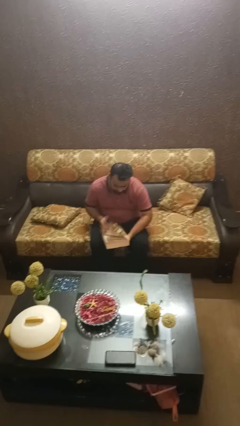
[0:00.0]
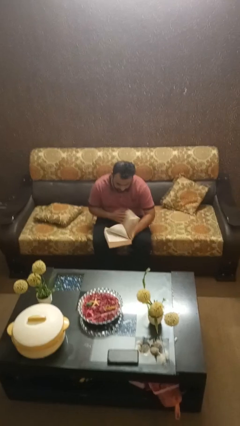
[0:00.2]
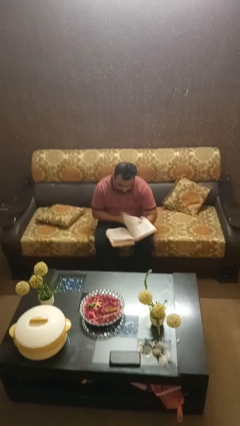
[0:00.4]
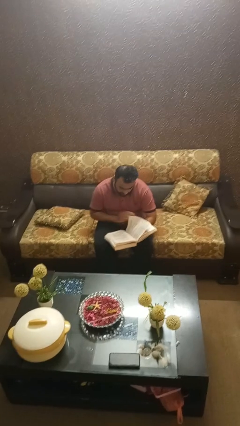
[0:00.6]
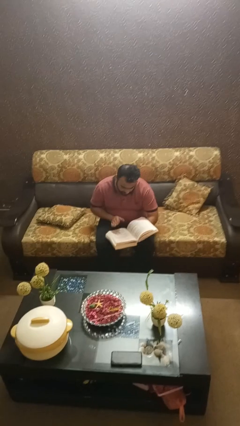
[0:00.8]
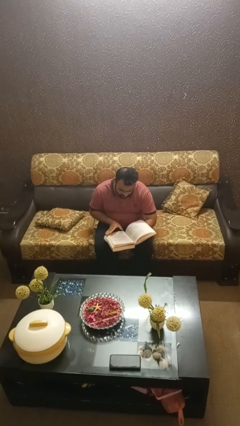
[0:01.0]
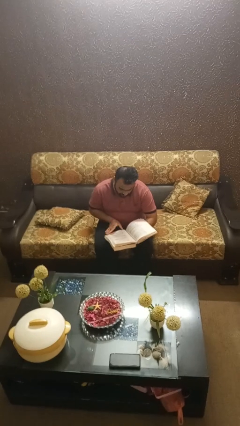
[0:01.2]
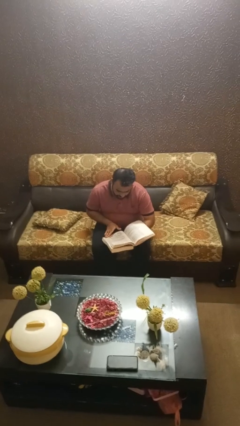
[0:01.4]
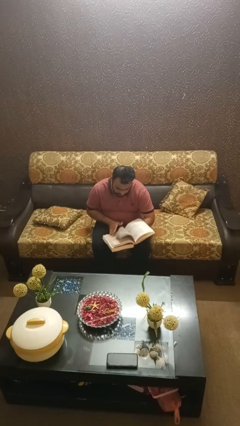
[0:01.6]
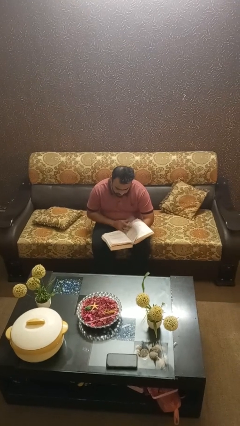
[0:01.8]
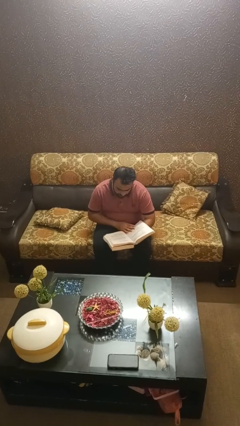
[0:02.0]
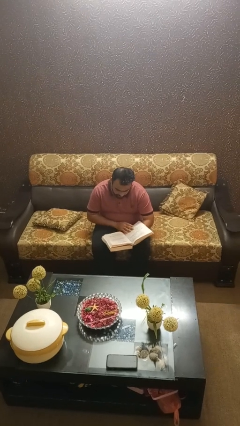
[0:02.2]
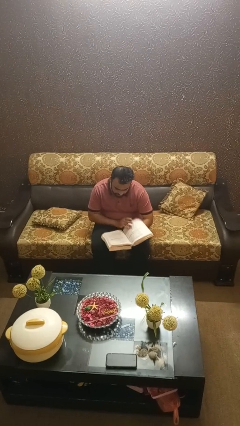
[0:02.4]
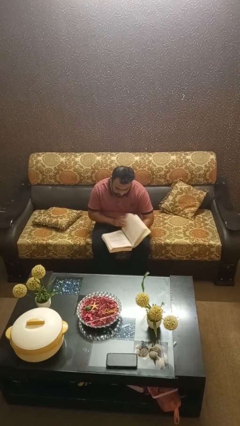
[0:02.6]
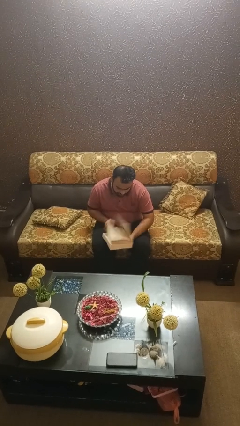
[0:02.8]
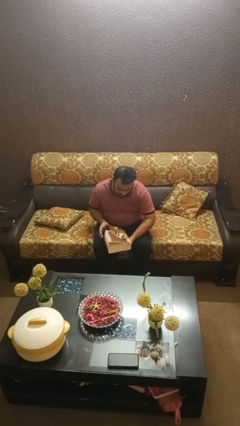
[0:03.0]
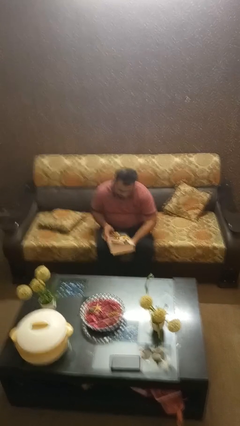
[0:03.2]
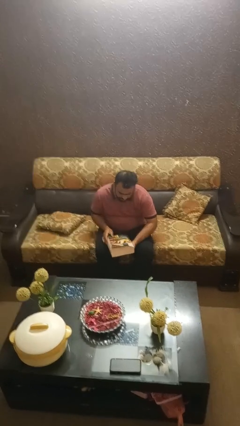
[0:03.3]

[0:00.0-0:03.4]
person reads book

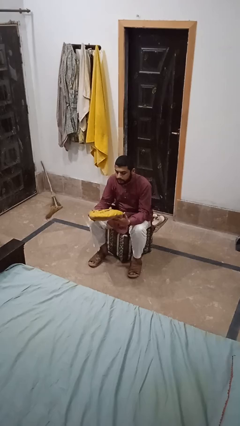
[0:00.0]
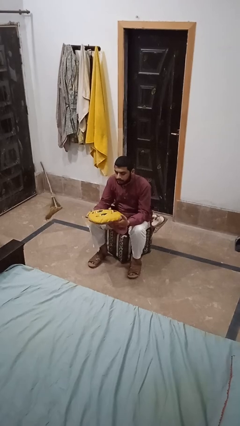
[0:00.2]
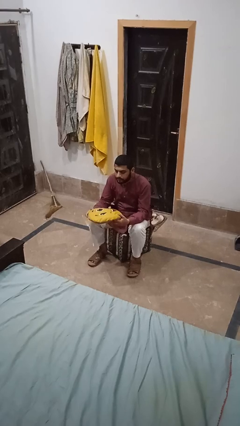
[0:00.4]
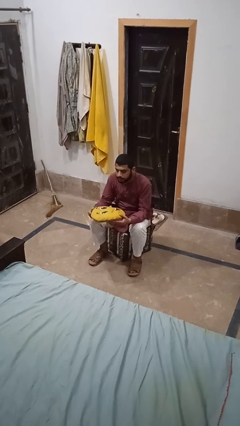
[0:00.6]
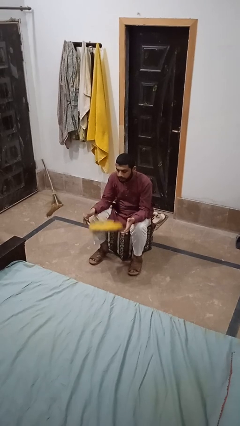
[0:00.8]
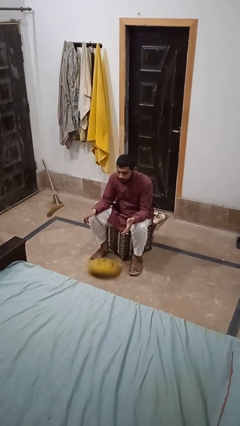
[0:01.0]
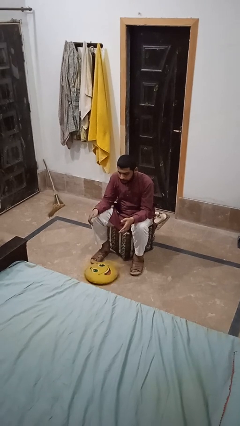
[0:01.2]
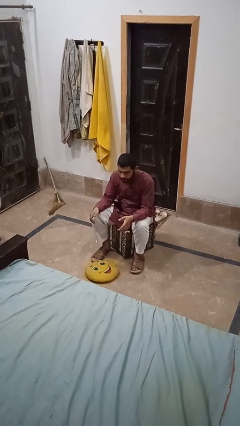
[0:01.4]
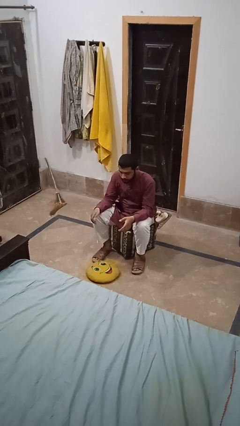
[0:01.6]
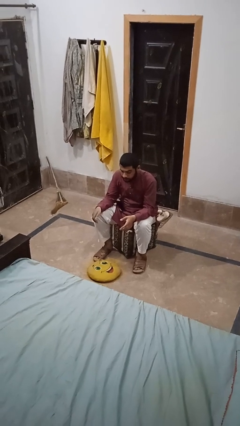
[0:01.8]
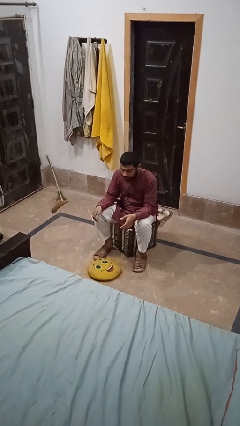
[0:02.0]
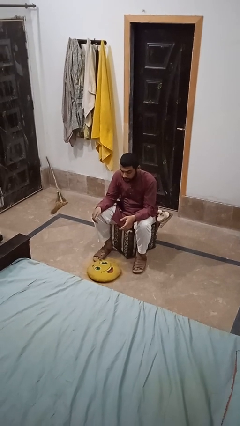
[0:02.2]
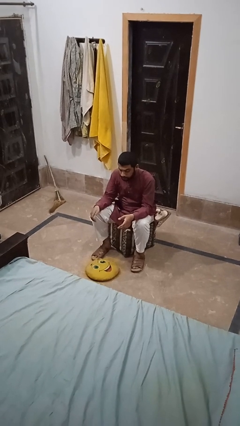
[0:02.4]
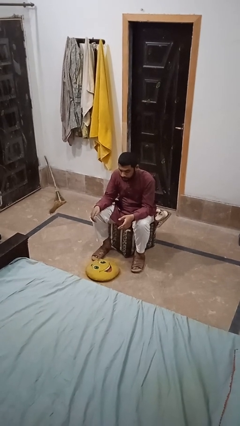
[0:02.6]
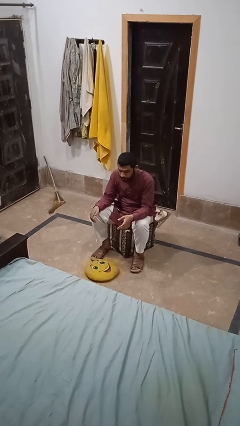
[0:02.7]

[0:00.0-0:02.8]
person drops object

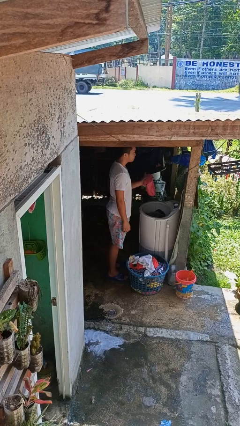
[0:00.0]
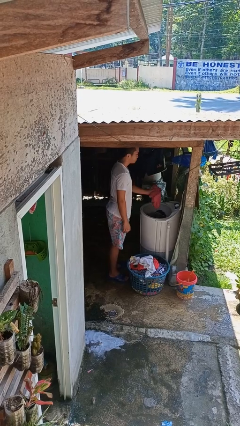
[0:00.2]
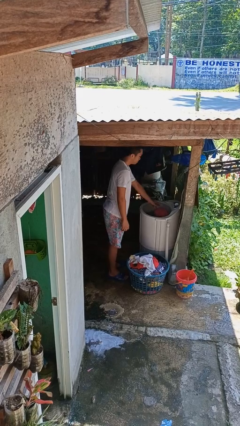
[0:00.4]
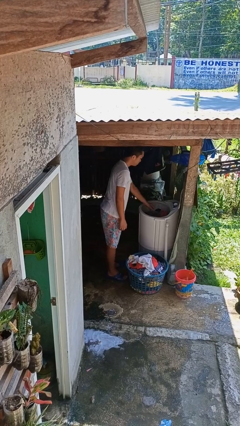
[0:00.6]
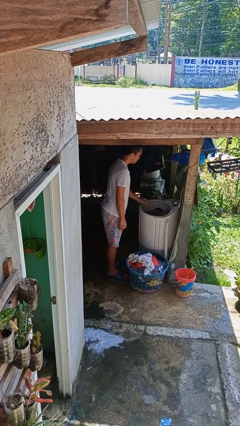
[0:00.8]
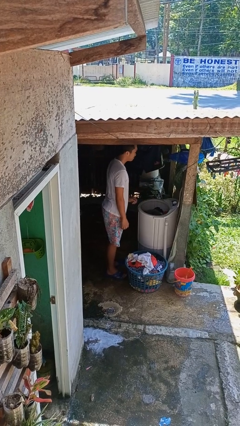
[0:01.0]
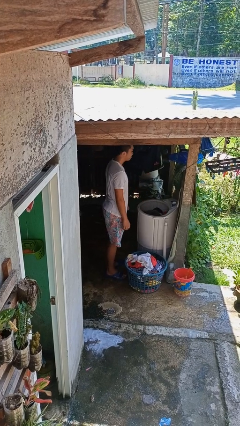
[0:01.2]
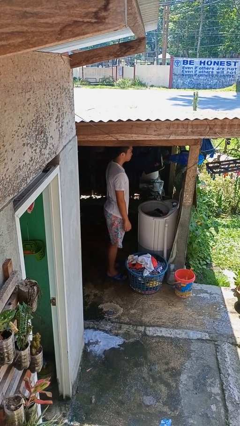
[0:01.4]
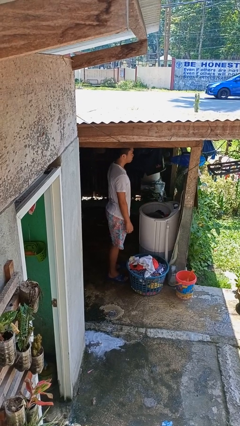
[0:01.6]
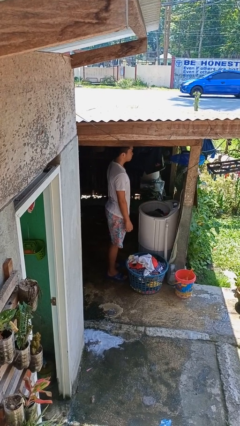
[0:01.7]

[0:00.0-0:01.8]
person loads clotheswasher

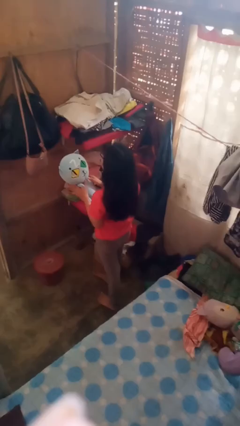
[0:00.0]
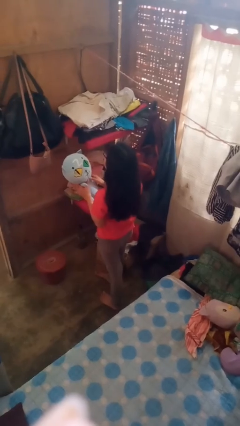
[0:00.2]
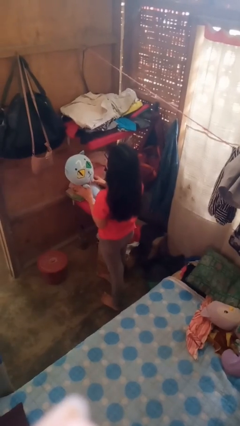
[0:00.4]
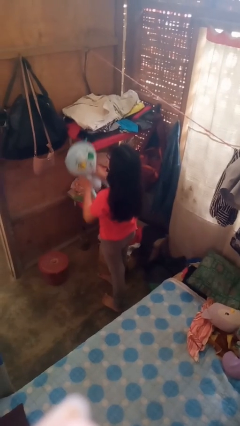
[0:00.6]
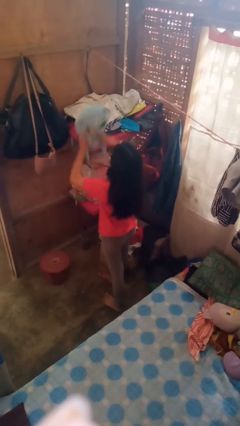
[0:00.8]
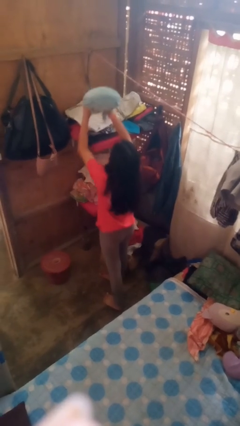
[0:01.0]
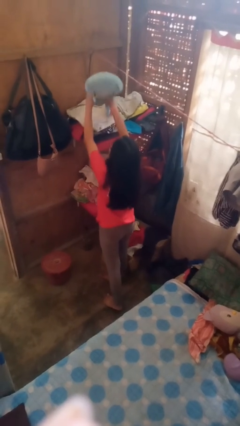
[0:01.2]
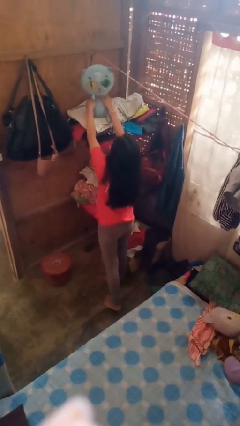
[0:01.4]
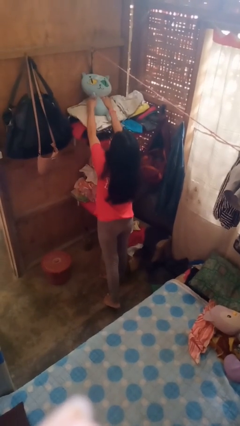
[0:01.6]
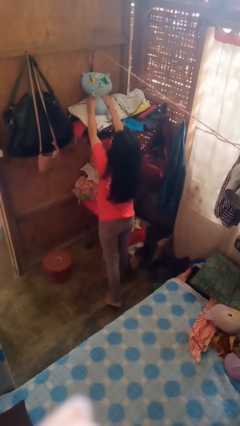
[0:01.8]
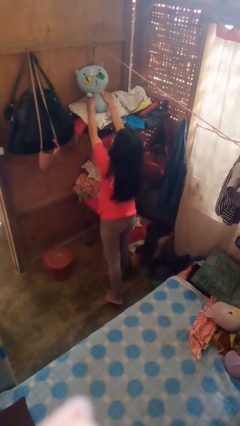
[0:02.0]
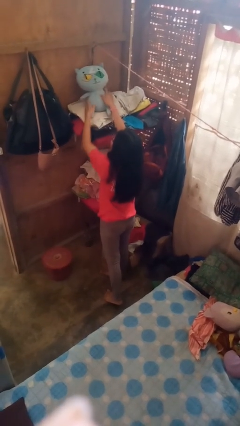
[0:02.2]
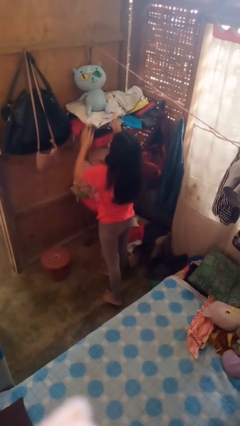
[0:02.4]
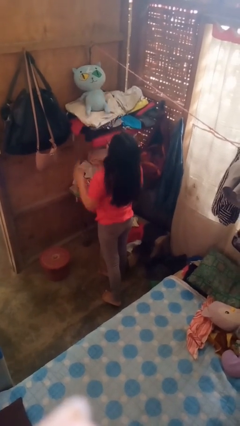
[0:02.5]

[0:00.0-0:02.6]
person puts down object on shelf

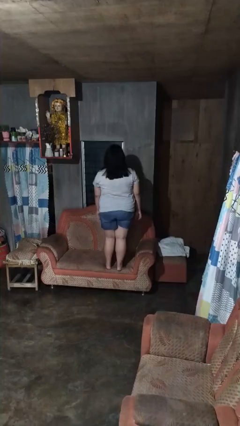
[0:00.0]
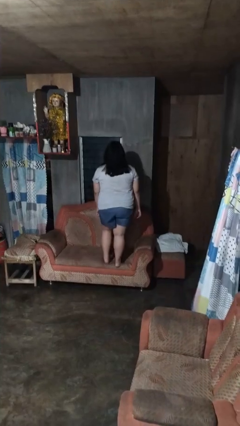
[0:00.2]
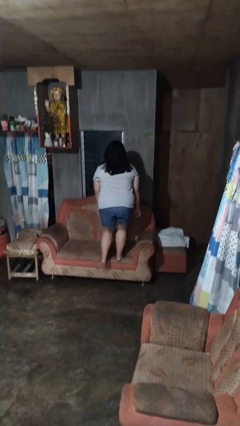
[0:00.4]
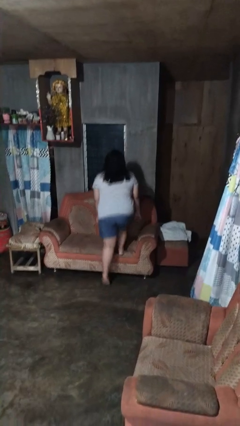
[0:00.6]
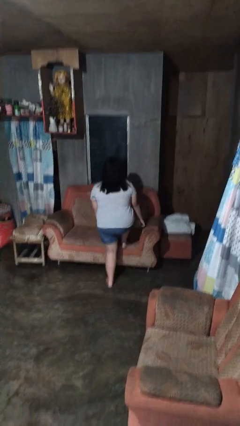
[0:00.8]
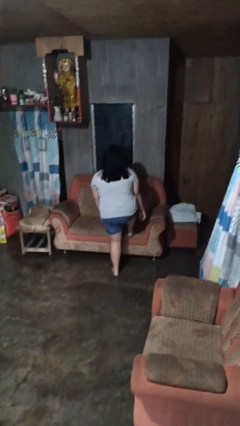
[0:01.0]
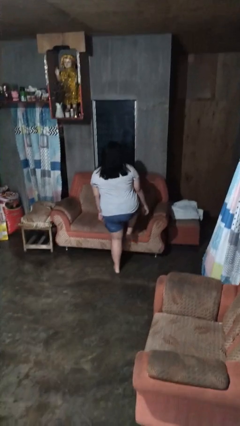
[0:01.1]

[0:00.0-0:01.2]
person climbs off couch

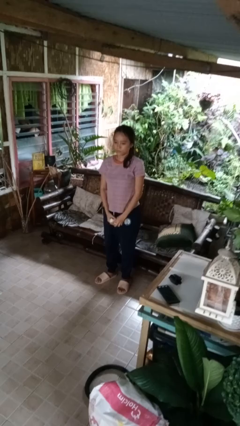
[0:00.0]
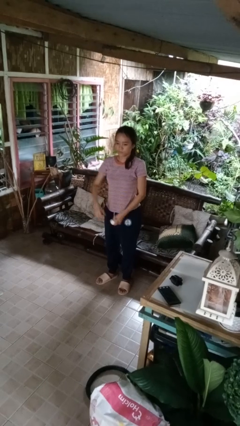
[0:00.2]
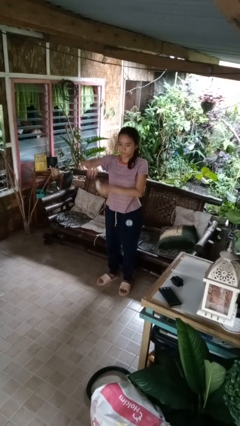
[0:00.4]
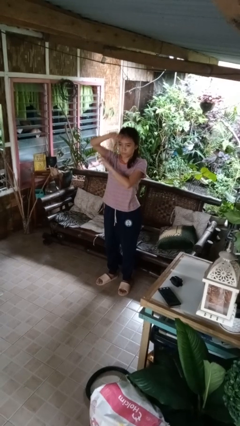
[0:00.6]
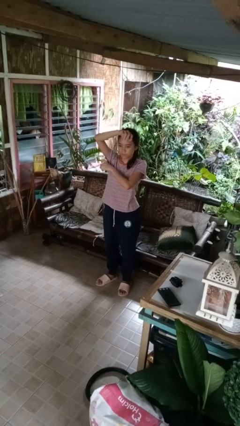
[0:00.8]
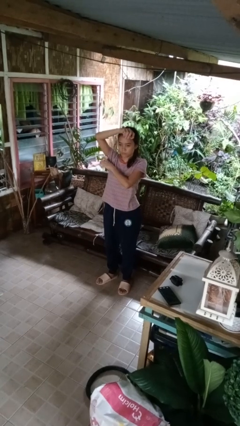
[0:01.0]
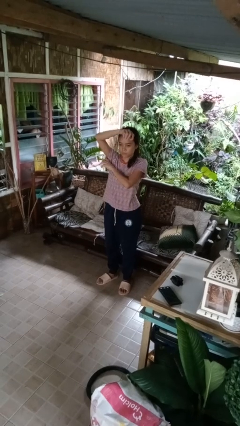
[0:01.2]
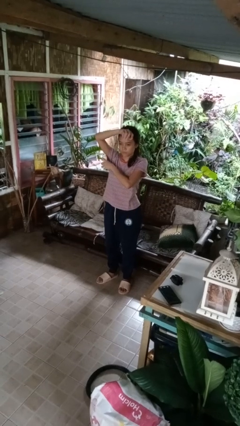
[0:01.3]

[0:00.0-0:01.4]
person applies deodorant

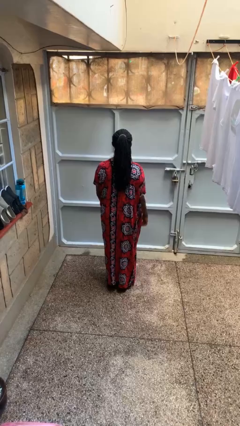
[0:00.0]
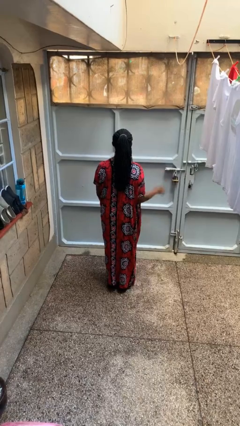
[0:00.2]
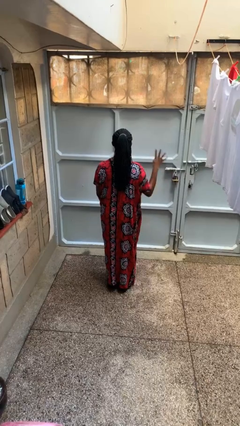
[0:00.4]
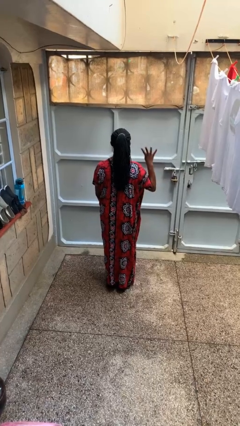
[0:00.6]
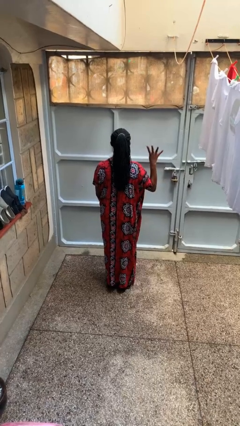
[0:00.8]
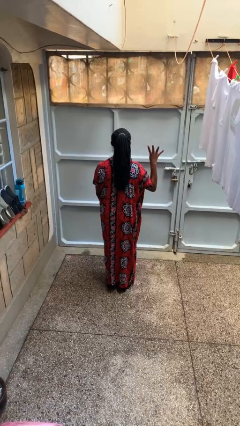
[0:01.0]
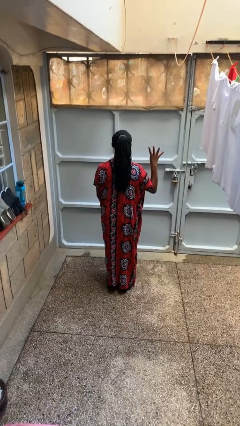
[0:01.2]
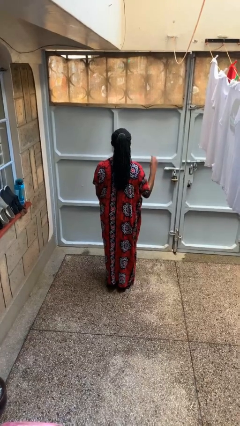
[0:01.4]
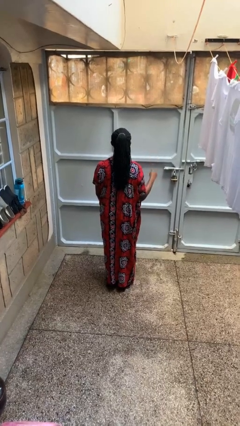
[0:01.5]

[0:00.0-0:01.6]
person gestures number four

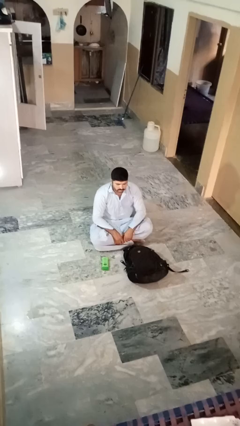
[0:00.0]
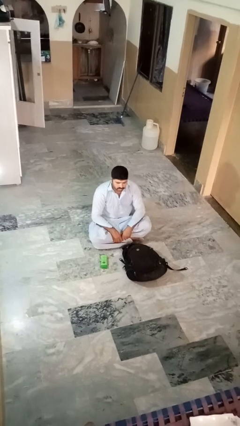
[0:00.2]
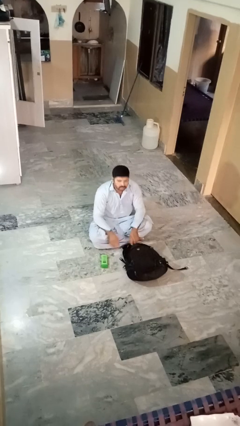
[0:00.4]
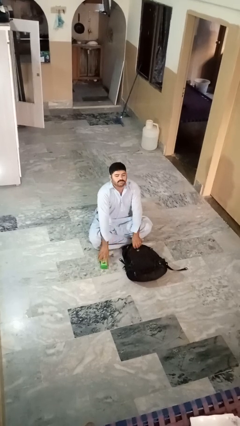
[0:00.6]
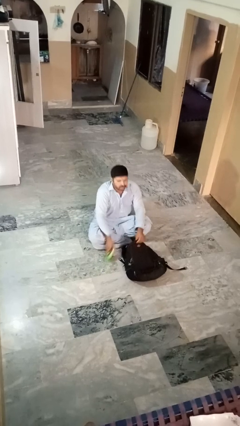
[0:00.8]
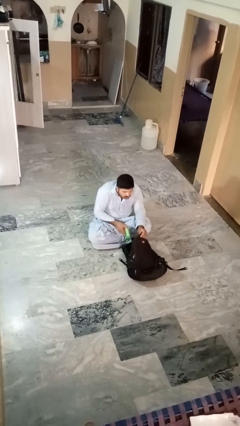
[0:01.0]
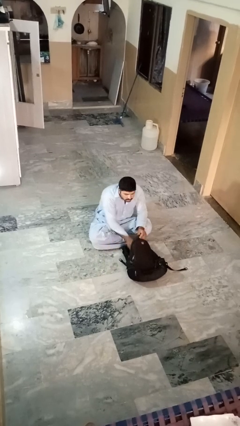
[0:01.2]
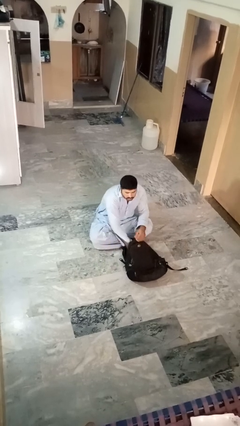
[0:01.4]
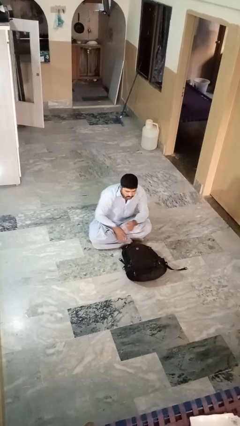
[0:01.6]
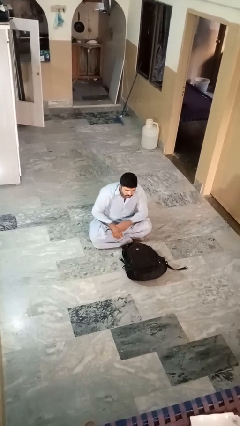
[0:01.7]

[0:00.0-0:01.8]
person puts object into bag
